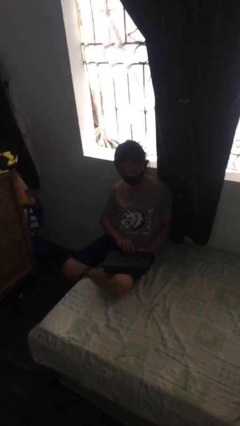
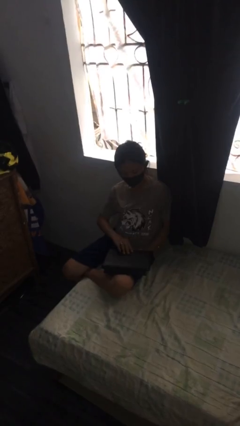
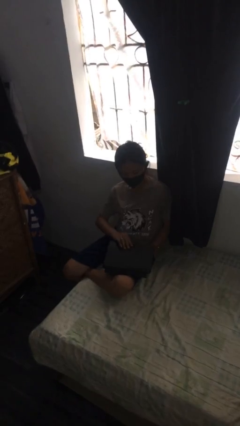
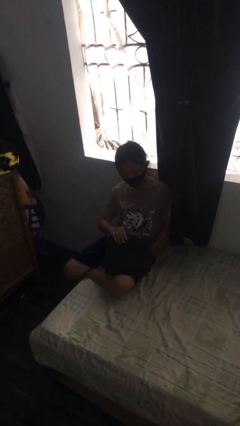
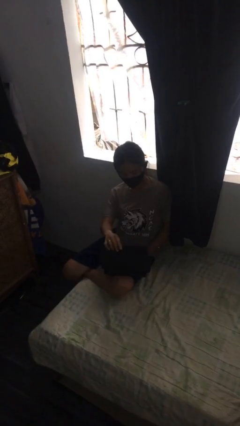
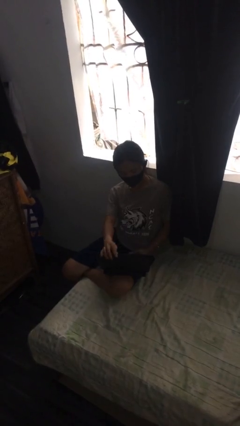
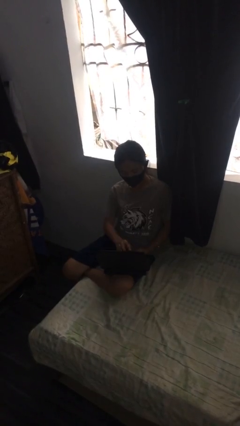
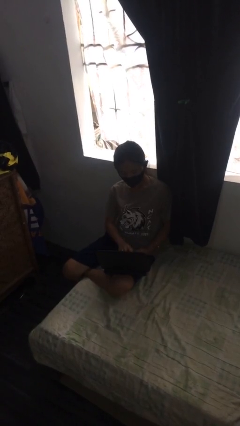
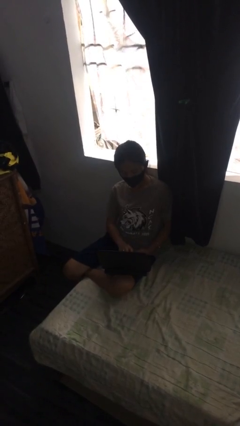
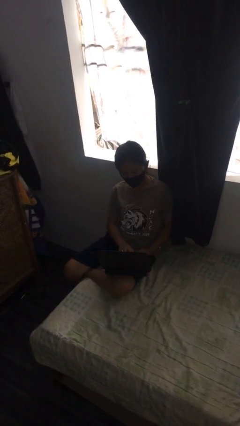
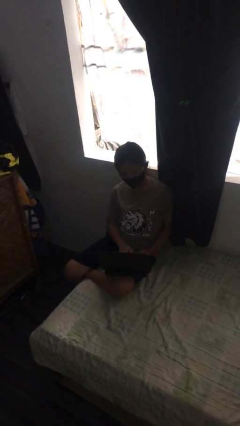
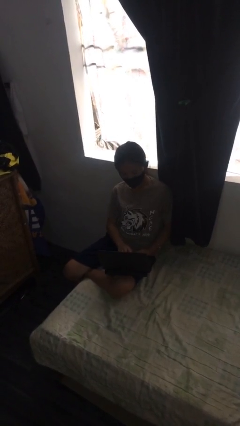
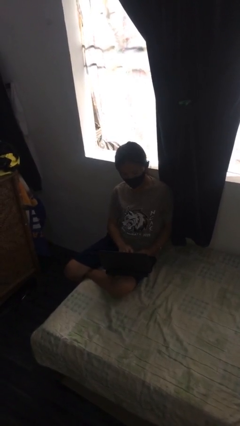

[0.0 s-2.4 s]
person interacts with laptop

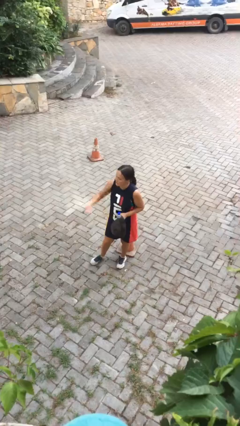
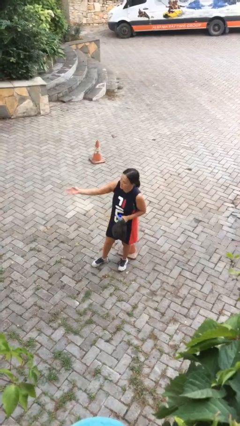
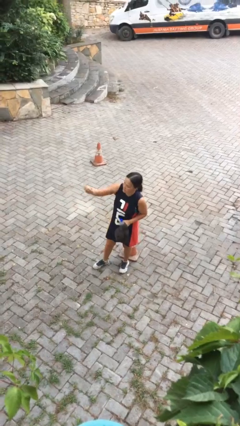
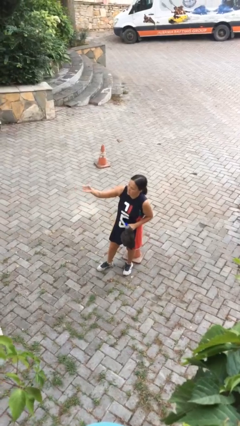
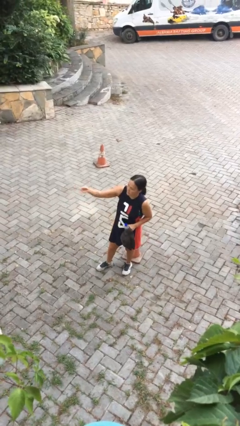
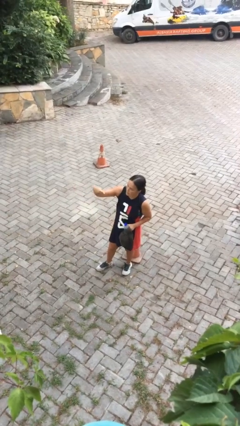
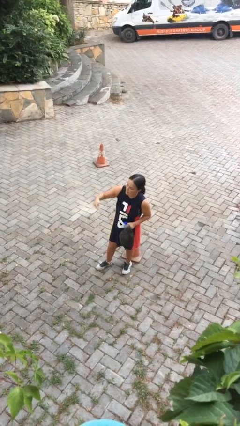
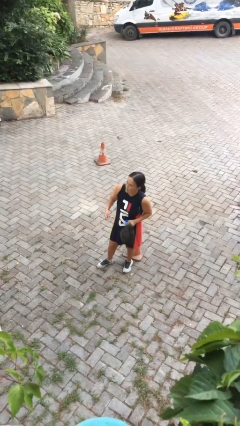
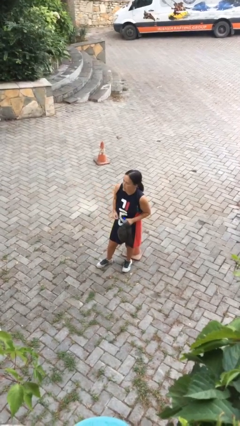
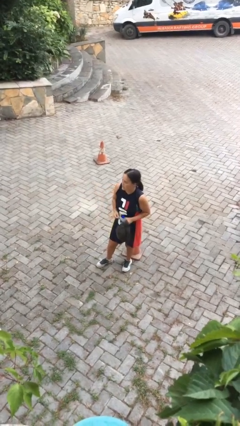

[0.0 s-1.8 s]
person gestures come here

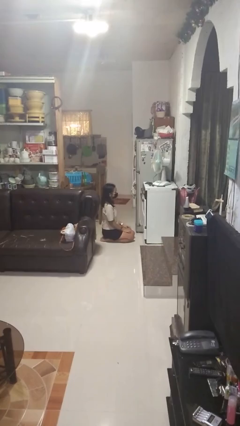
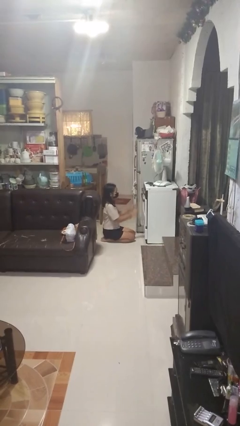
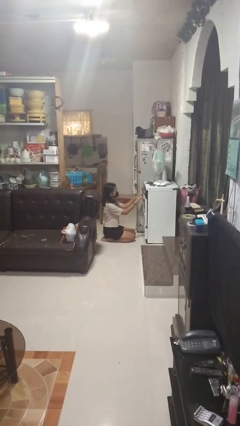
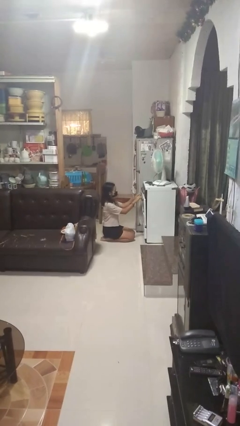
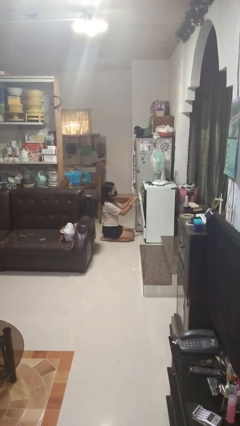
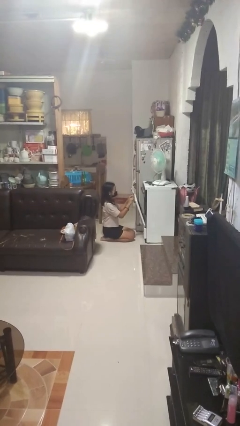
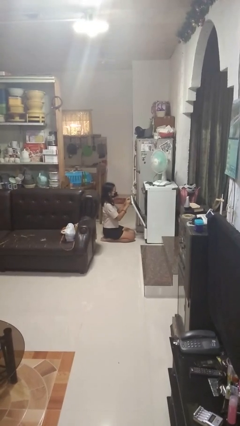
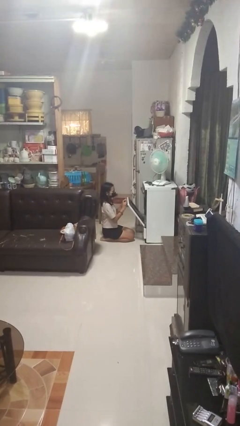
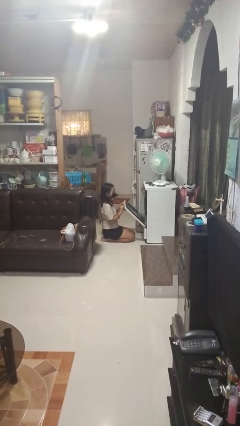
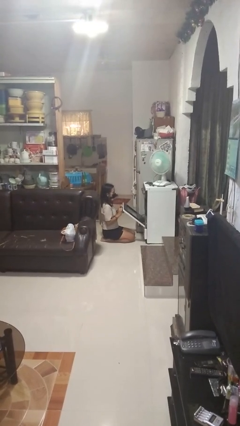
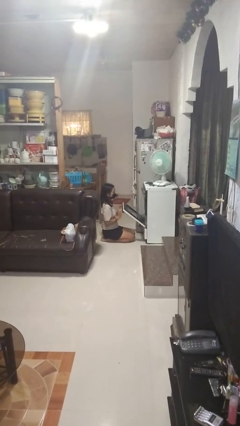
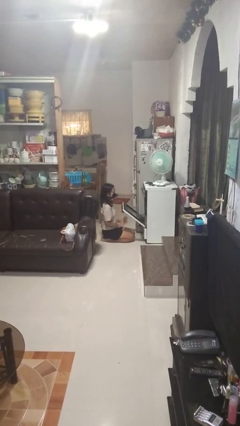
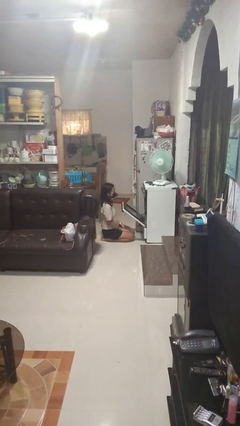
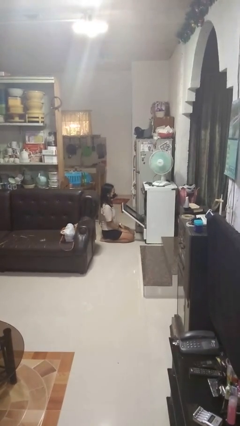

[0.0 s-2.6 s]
person opens oven door

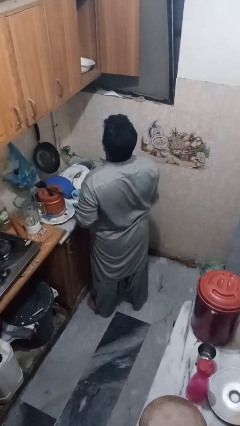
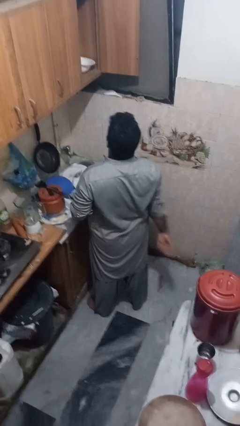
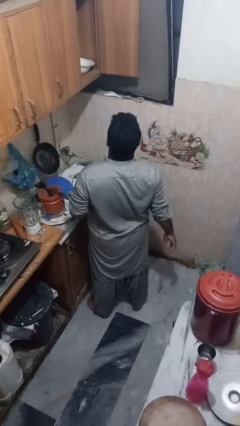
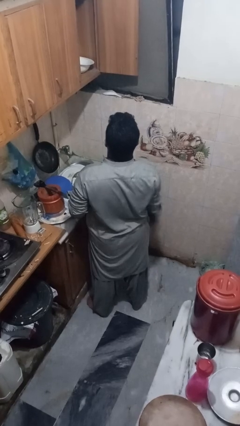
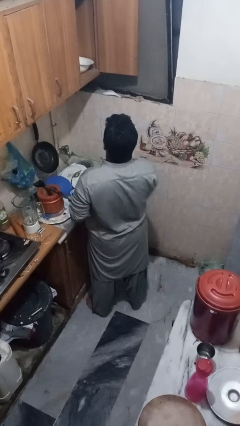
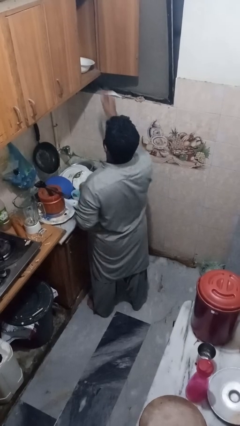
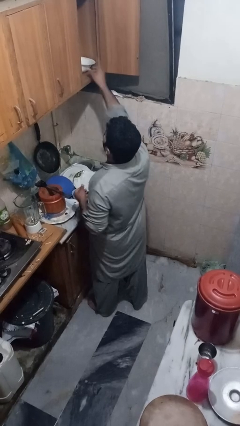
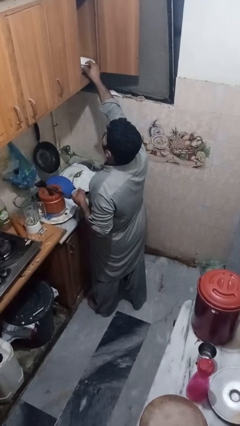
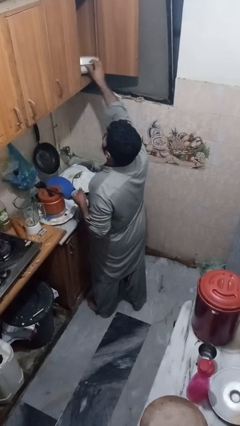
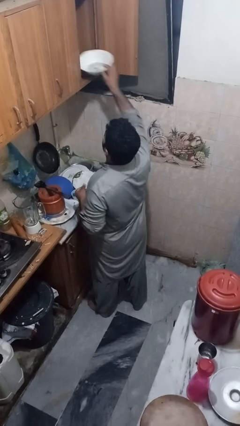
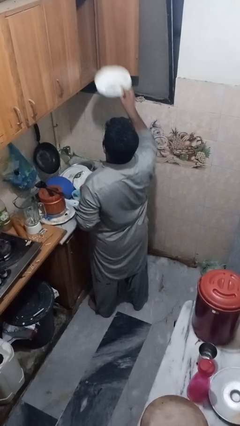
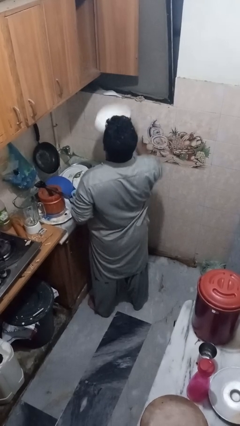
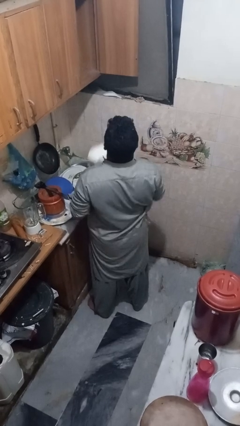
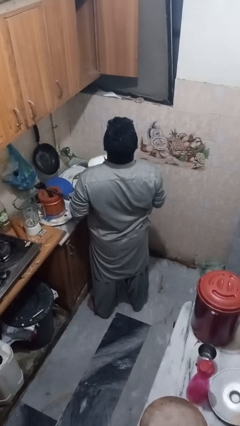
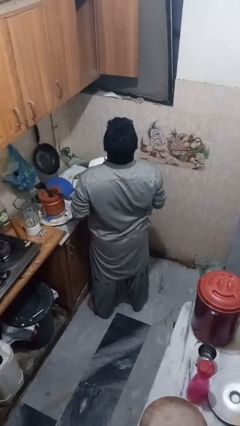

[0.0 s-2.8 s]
person takes object from cabinet

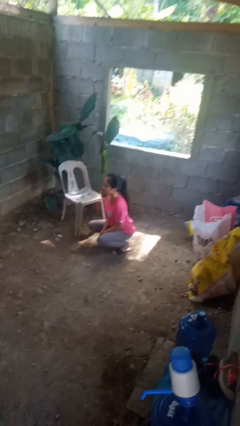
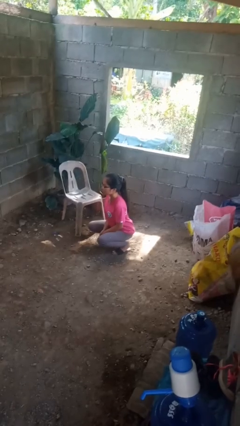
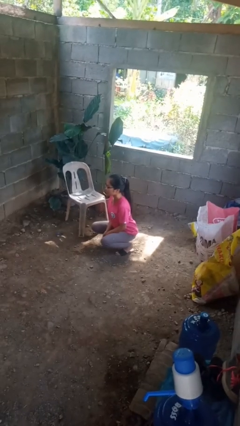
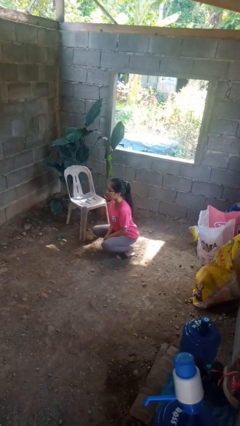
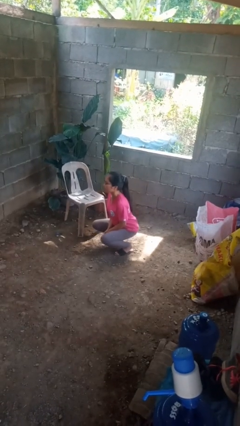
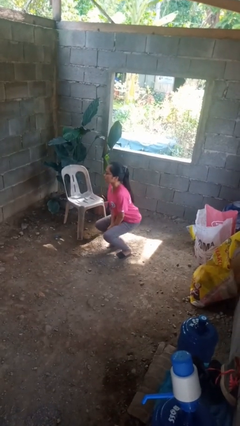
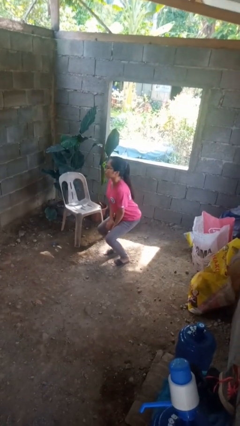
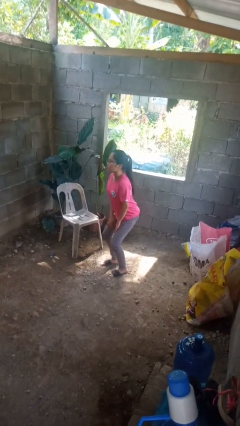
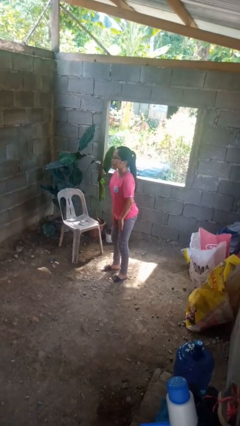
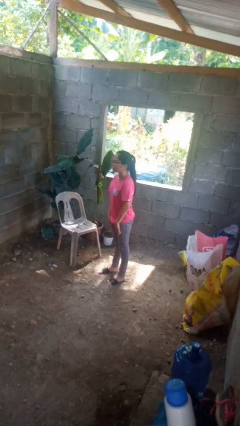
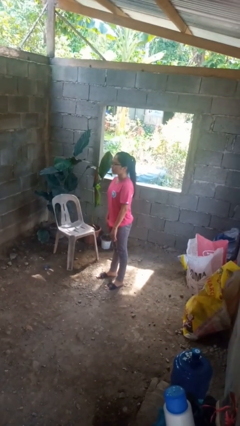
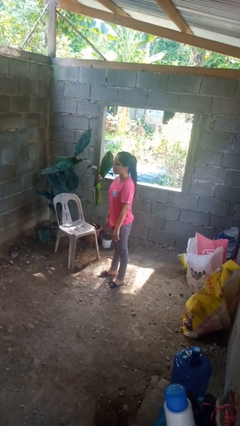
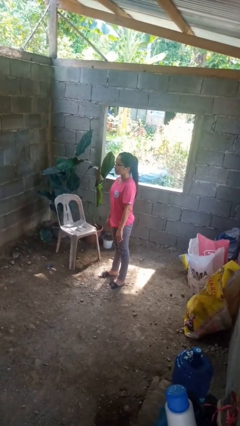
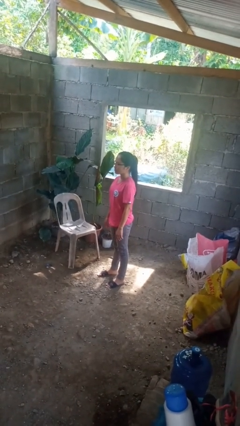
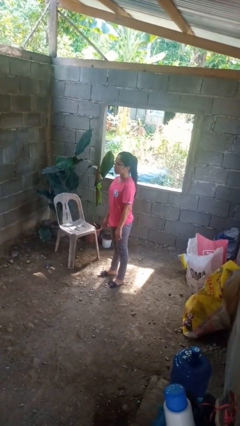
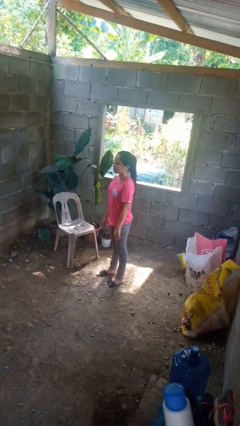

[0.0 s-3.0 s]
person stands up

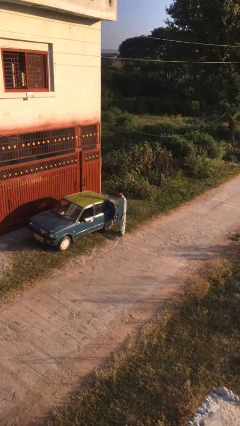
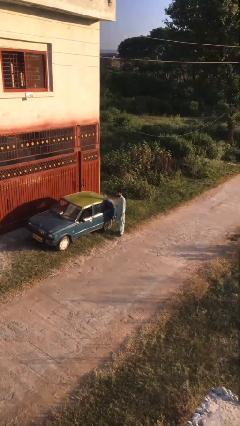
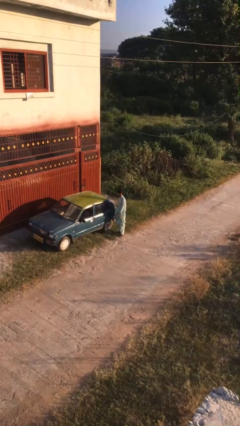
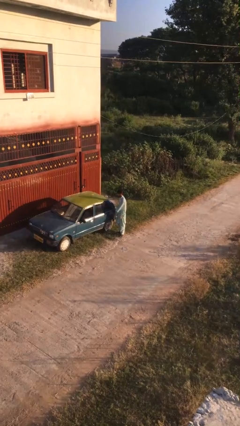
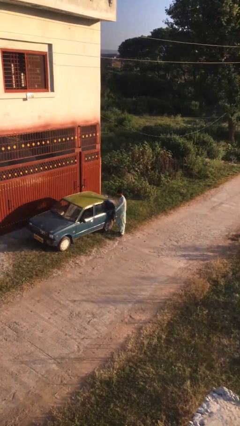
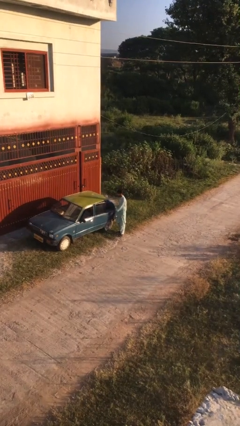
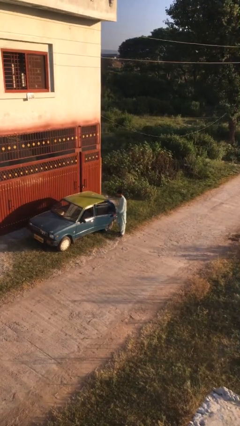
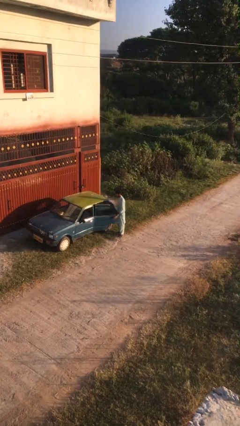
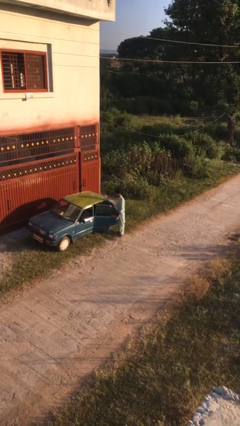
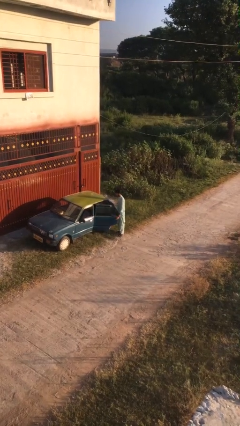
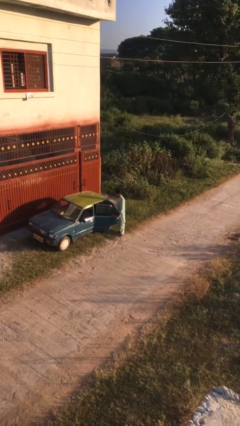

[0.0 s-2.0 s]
person opens car door

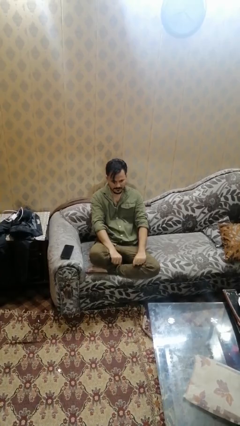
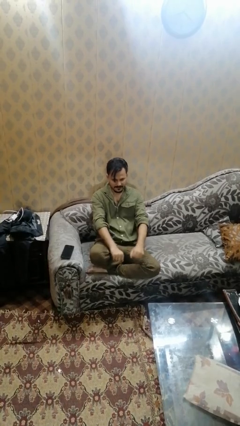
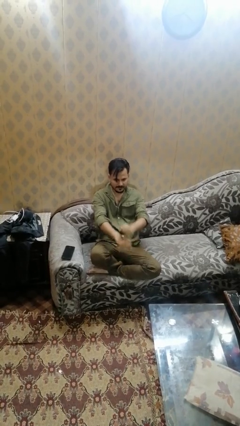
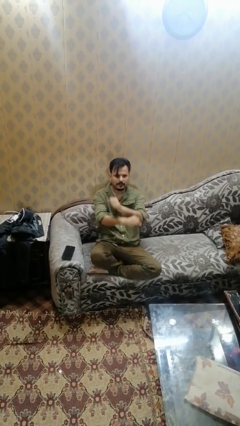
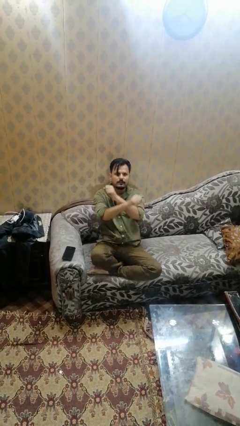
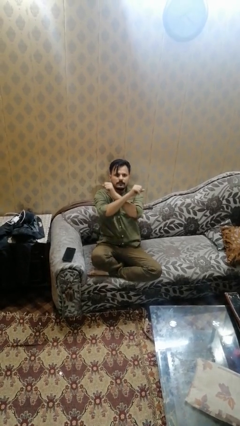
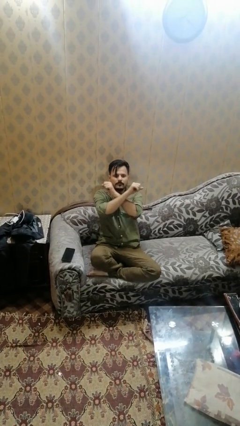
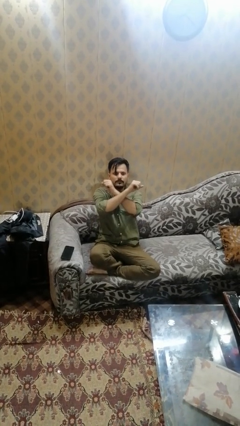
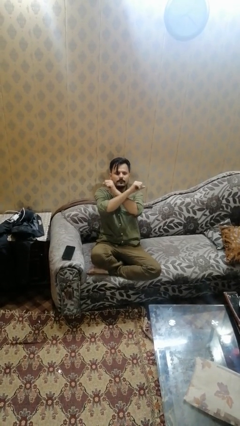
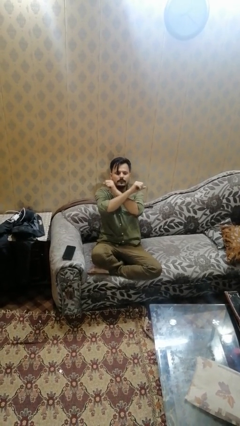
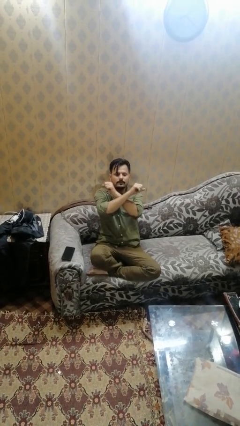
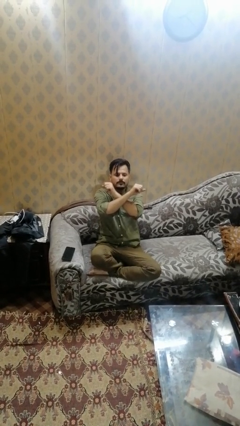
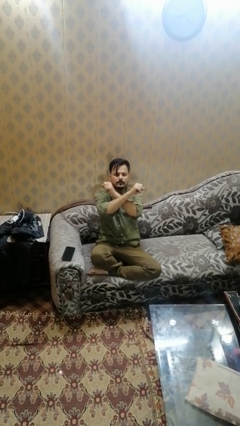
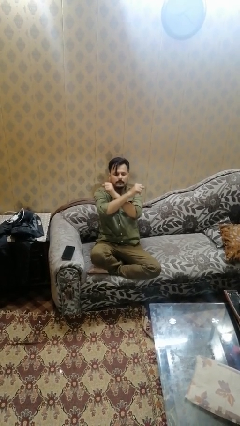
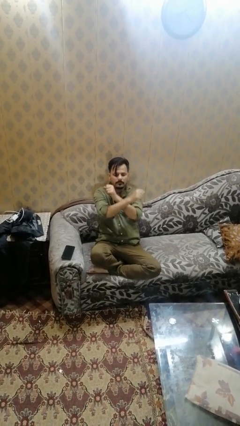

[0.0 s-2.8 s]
person gestures arms x
